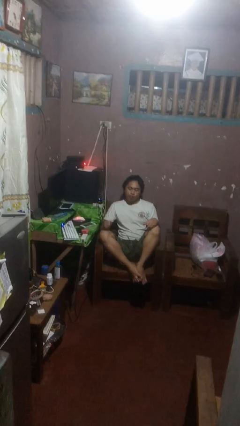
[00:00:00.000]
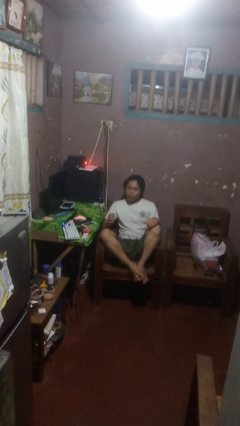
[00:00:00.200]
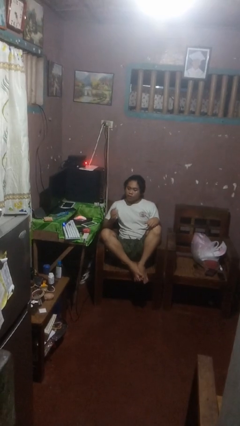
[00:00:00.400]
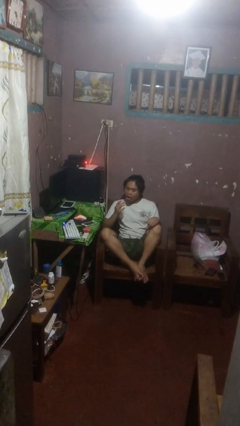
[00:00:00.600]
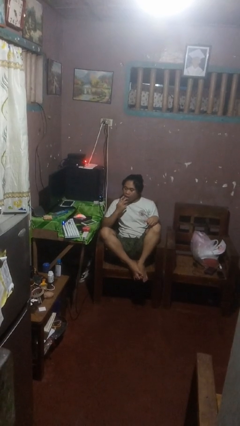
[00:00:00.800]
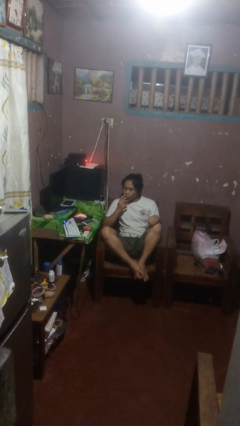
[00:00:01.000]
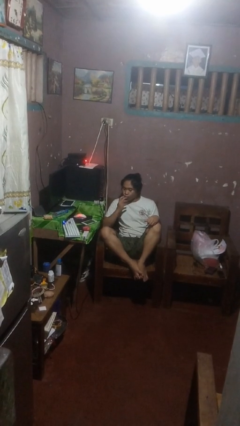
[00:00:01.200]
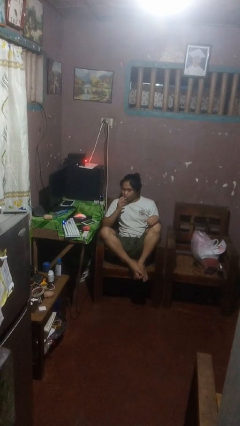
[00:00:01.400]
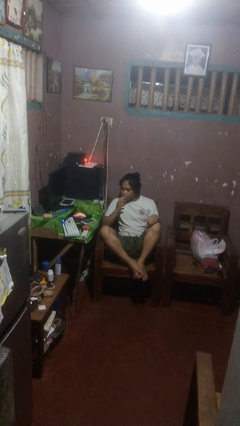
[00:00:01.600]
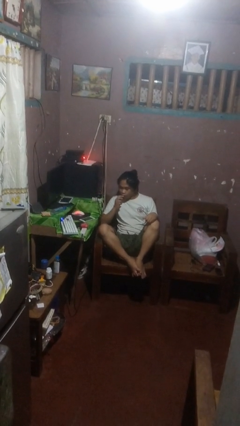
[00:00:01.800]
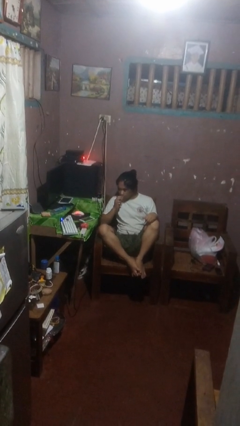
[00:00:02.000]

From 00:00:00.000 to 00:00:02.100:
person licks fingers

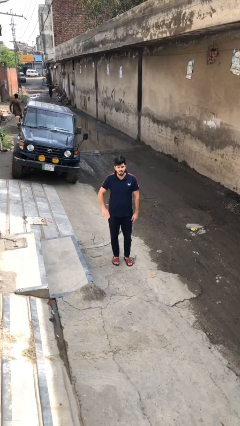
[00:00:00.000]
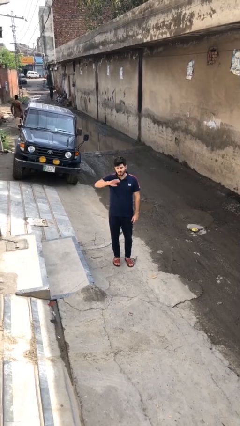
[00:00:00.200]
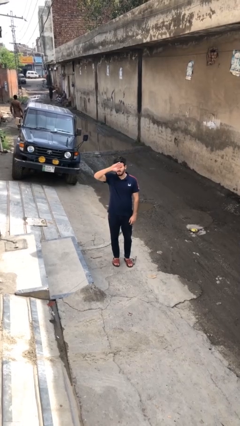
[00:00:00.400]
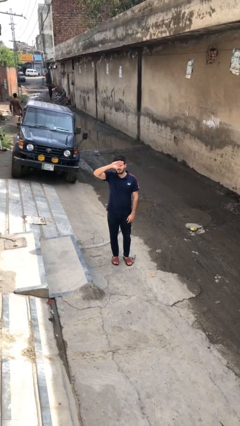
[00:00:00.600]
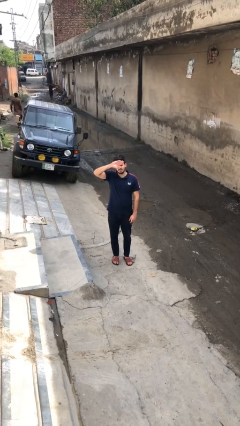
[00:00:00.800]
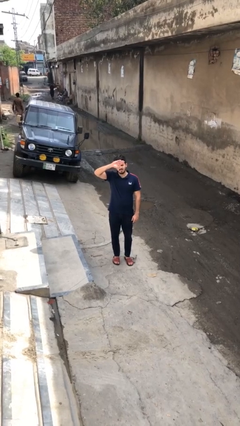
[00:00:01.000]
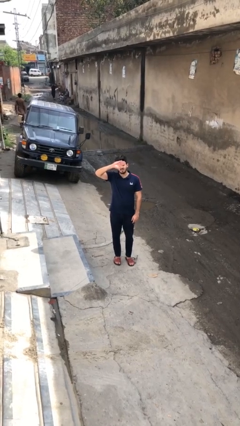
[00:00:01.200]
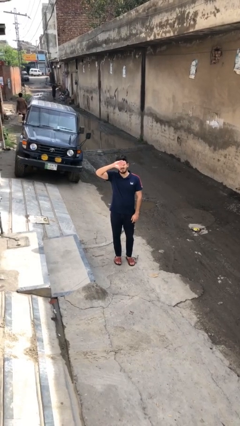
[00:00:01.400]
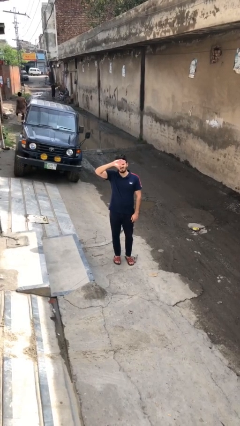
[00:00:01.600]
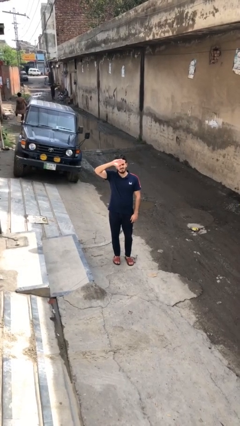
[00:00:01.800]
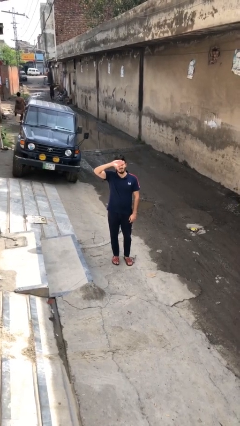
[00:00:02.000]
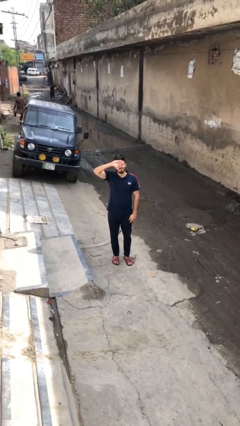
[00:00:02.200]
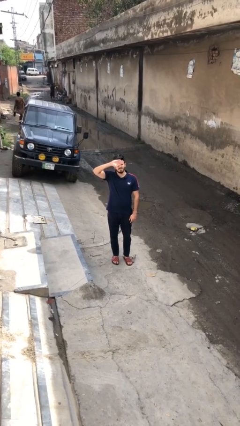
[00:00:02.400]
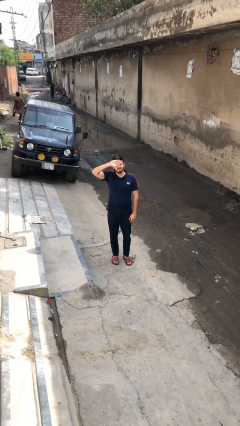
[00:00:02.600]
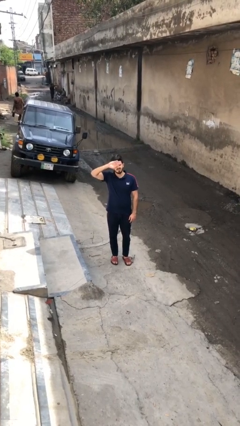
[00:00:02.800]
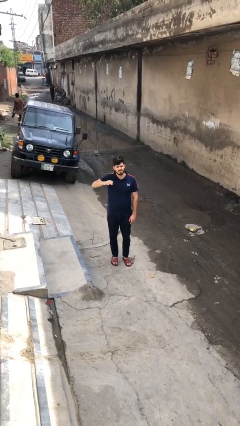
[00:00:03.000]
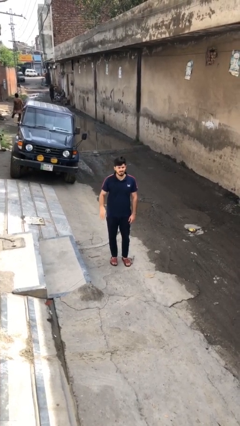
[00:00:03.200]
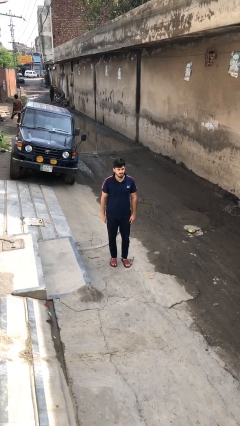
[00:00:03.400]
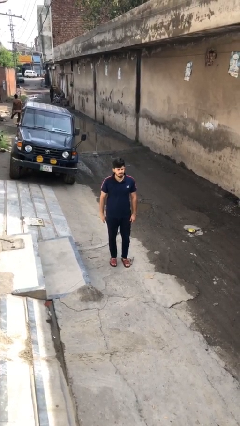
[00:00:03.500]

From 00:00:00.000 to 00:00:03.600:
person shades eyes

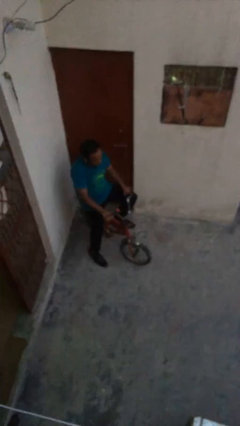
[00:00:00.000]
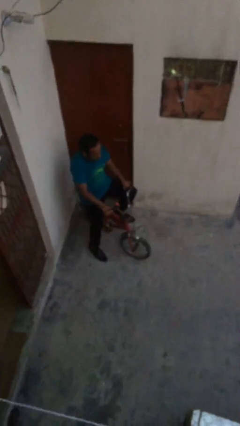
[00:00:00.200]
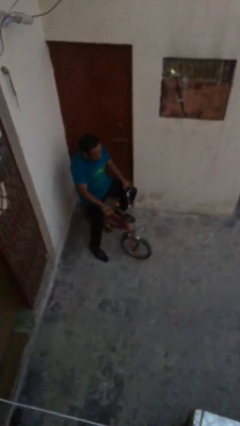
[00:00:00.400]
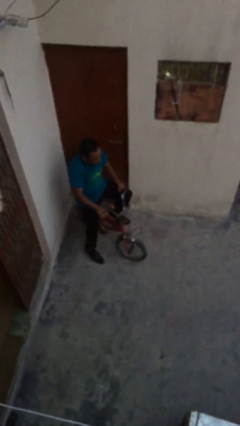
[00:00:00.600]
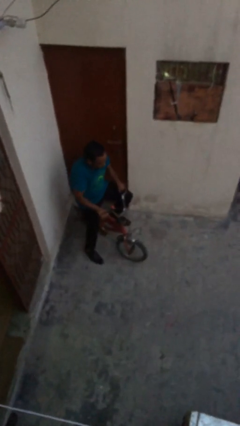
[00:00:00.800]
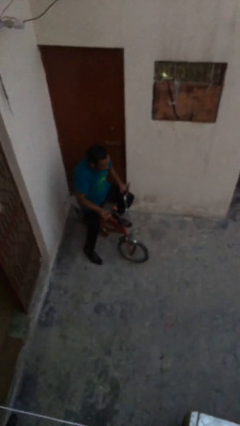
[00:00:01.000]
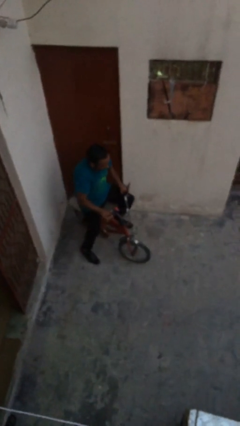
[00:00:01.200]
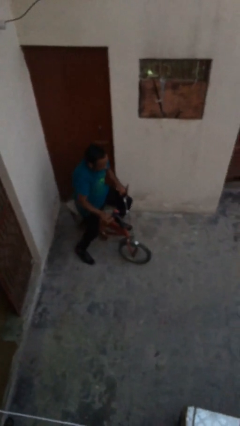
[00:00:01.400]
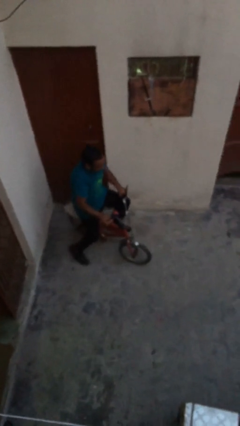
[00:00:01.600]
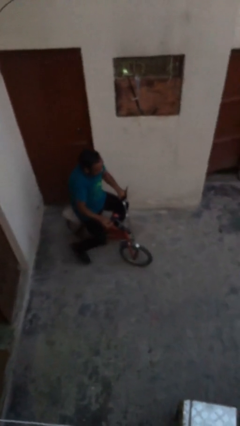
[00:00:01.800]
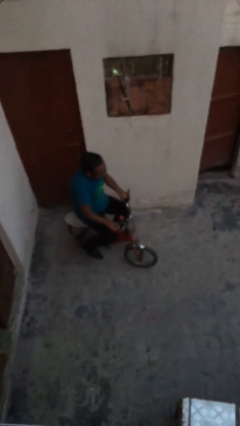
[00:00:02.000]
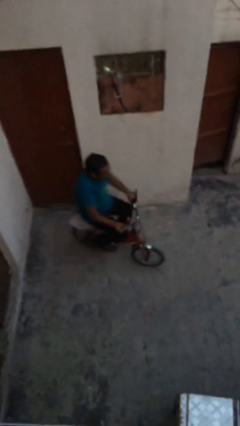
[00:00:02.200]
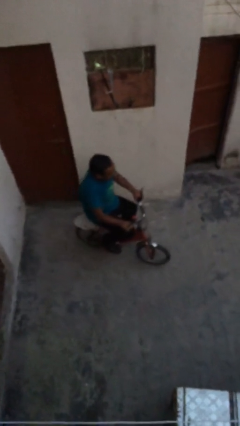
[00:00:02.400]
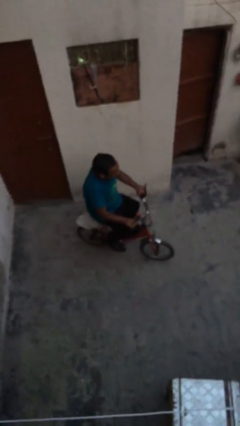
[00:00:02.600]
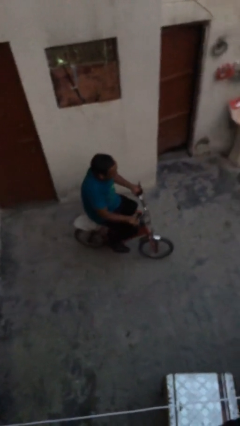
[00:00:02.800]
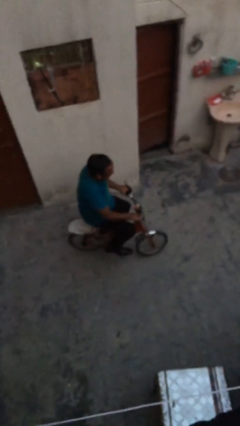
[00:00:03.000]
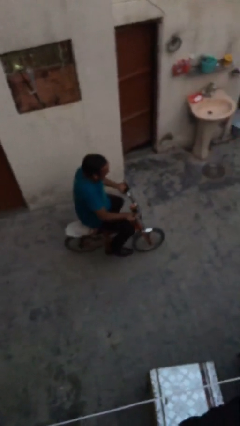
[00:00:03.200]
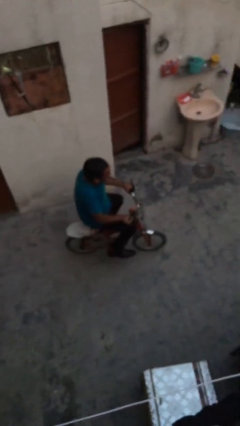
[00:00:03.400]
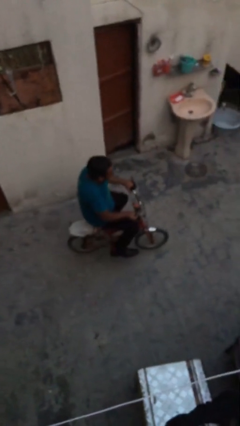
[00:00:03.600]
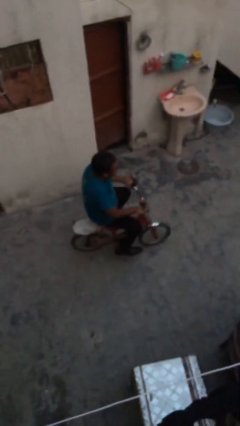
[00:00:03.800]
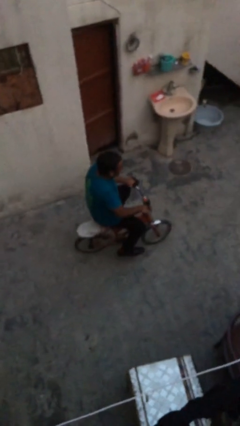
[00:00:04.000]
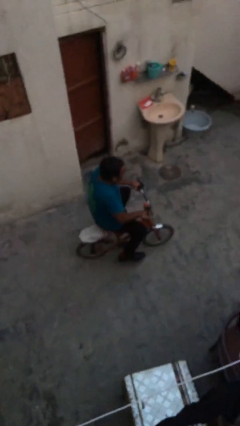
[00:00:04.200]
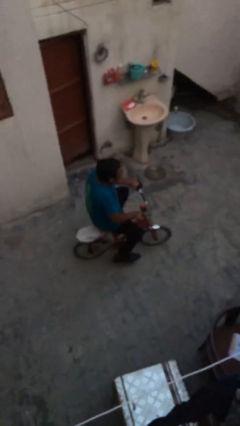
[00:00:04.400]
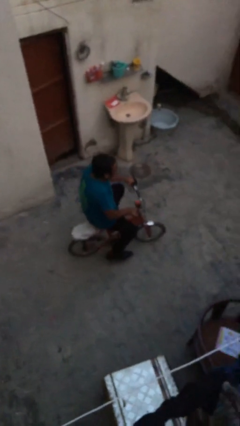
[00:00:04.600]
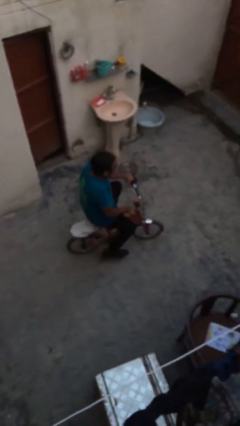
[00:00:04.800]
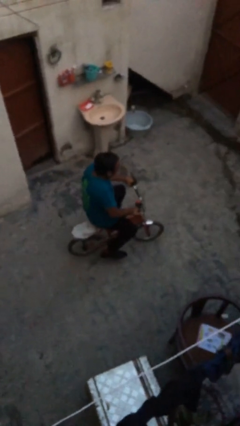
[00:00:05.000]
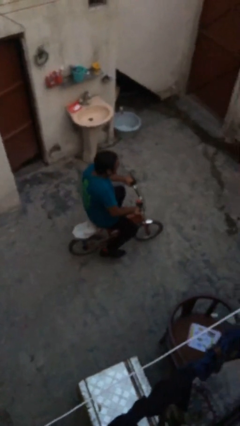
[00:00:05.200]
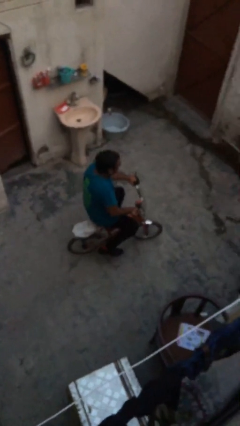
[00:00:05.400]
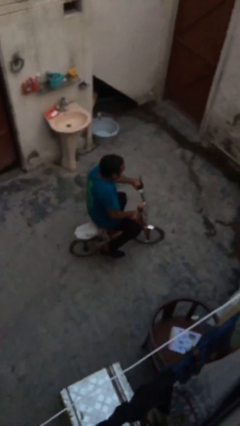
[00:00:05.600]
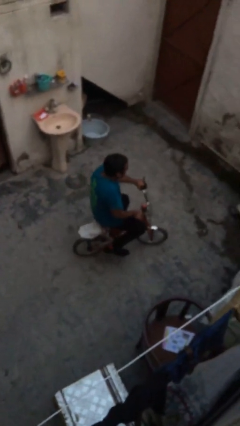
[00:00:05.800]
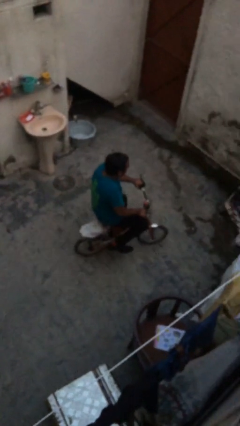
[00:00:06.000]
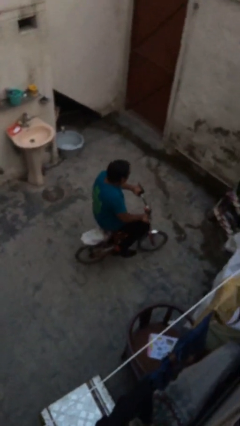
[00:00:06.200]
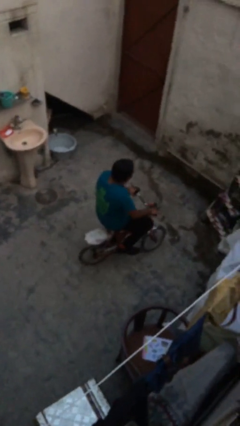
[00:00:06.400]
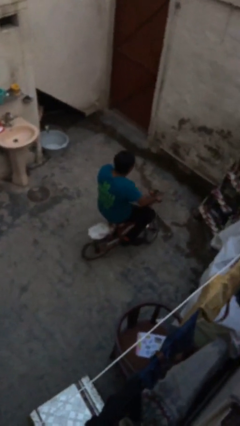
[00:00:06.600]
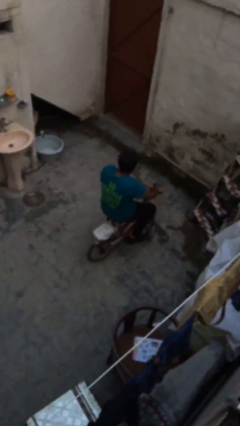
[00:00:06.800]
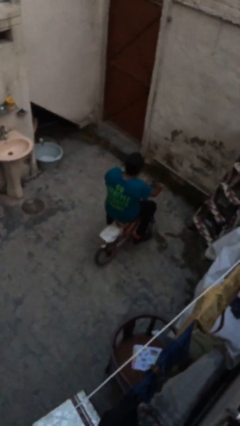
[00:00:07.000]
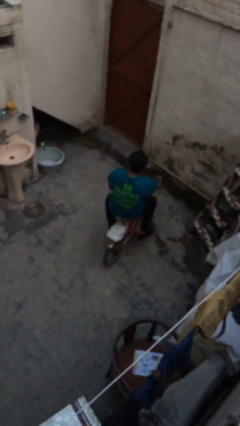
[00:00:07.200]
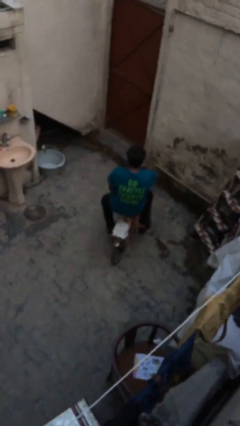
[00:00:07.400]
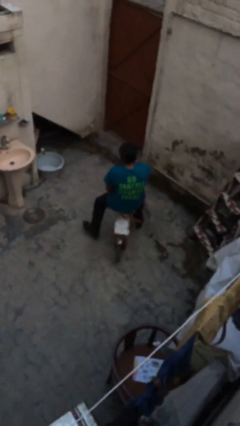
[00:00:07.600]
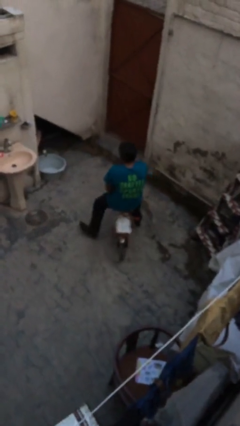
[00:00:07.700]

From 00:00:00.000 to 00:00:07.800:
person rides bicycle

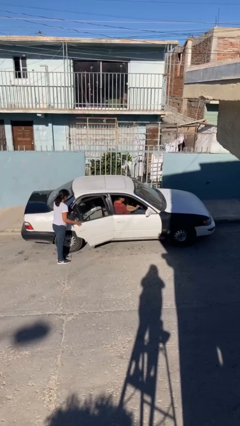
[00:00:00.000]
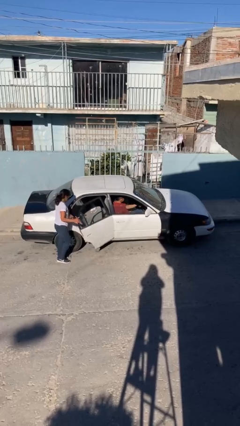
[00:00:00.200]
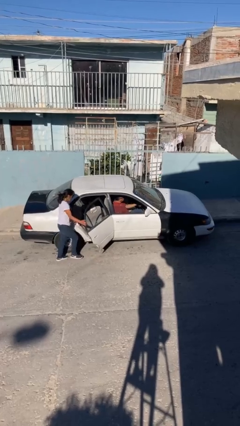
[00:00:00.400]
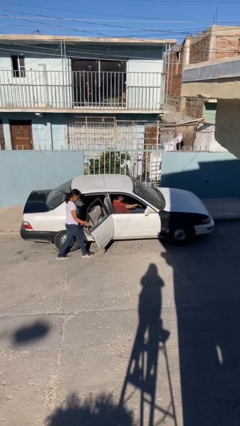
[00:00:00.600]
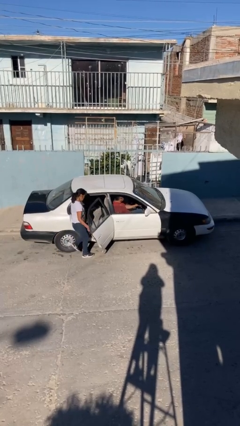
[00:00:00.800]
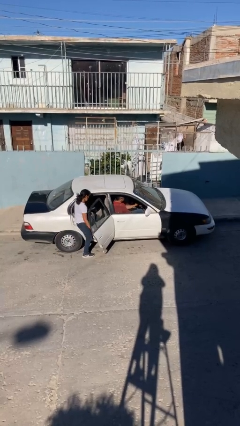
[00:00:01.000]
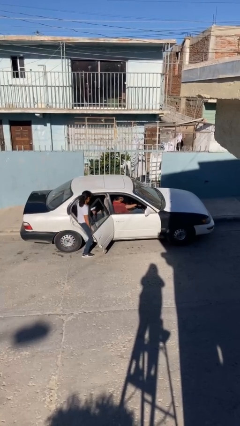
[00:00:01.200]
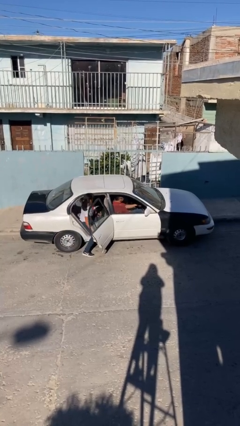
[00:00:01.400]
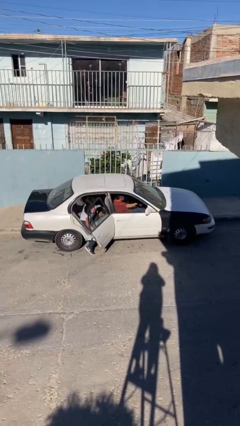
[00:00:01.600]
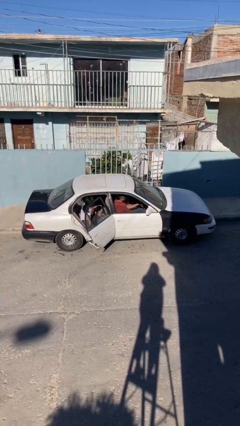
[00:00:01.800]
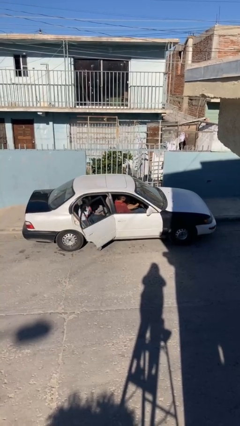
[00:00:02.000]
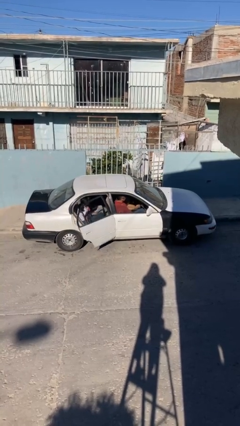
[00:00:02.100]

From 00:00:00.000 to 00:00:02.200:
car picks up person

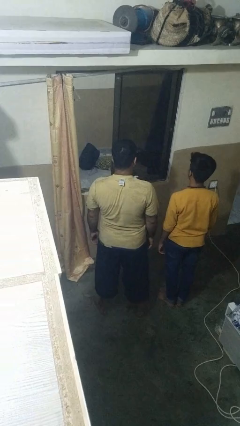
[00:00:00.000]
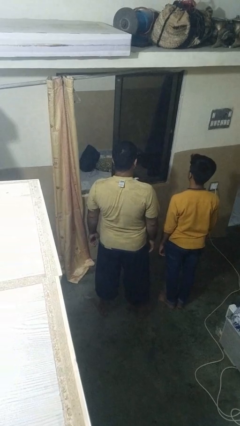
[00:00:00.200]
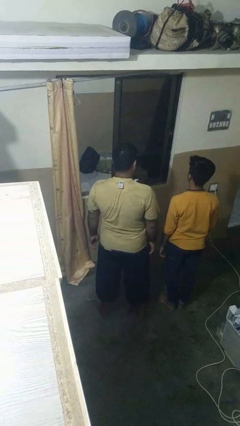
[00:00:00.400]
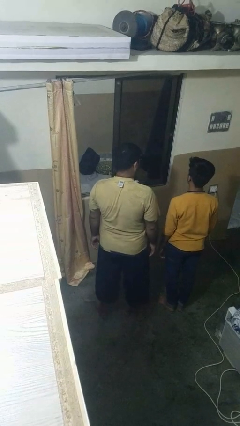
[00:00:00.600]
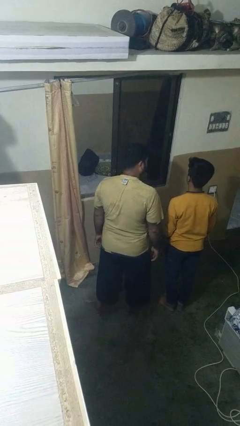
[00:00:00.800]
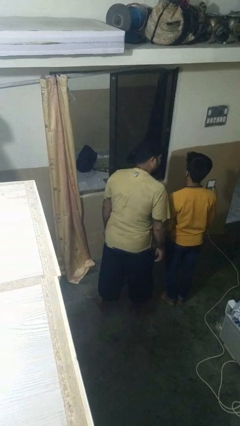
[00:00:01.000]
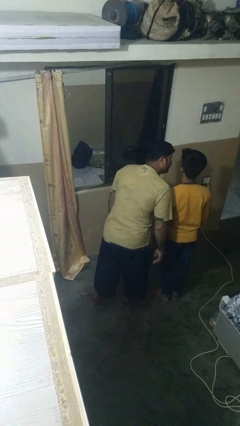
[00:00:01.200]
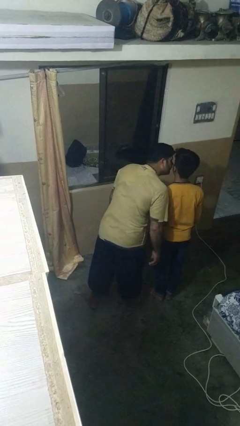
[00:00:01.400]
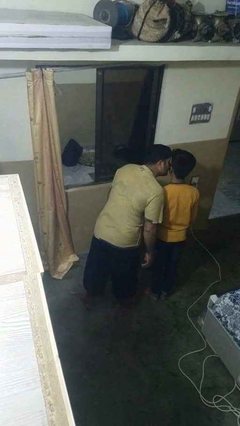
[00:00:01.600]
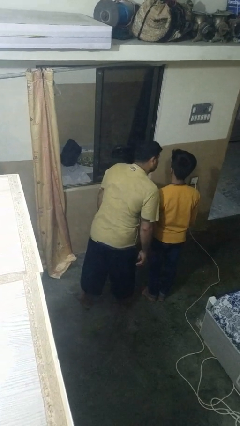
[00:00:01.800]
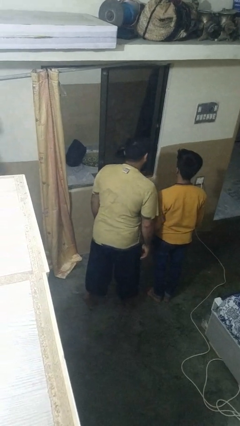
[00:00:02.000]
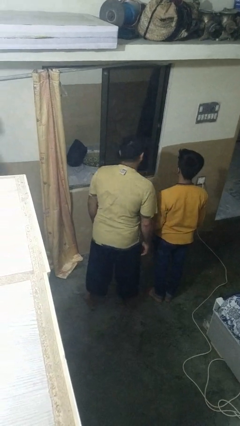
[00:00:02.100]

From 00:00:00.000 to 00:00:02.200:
person kisses cheek of person
